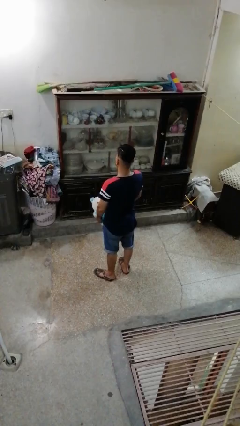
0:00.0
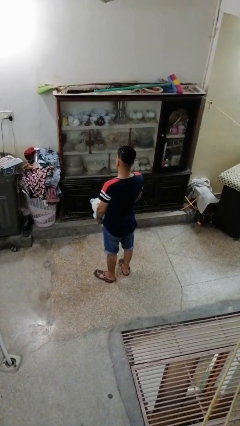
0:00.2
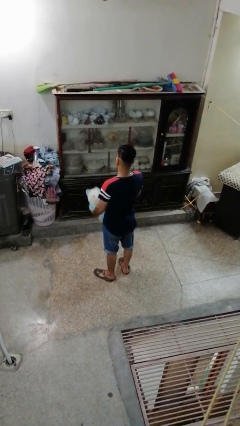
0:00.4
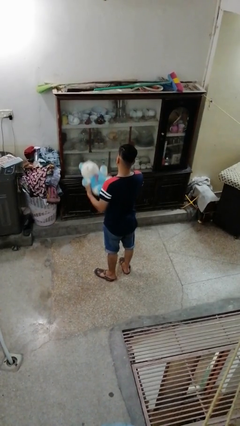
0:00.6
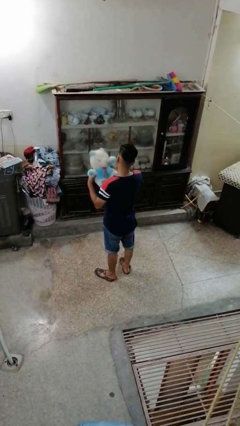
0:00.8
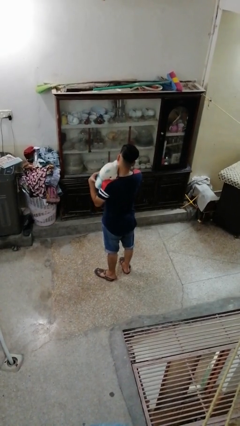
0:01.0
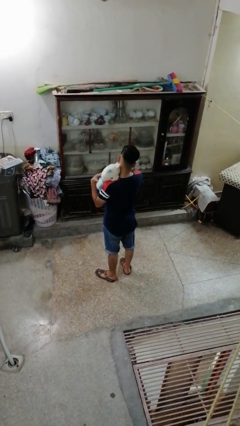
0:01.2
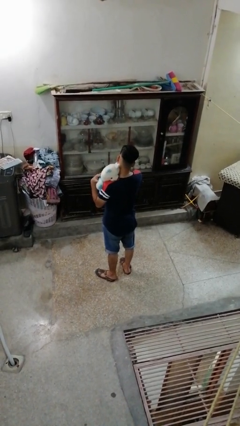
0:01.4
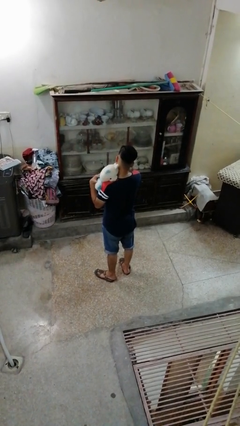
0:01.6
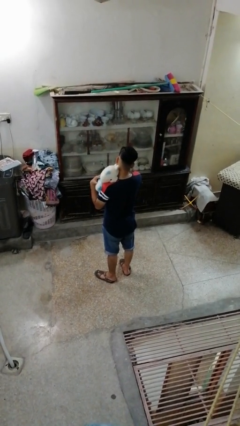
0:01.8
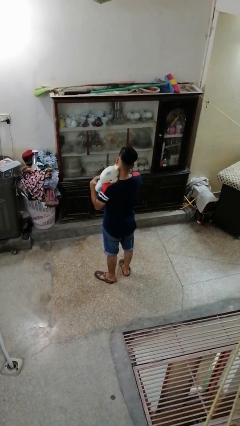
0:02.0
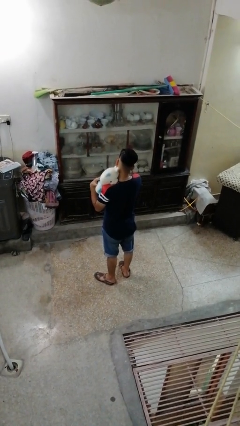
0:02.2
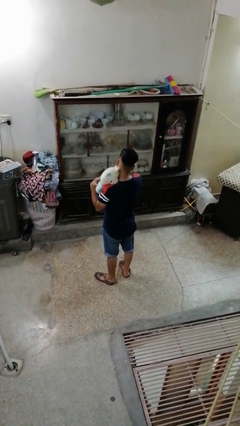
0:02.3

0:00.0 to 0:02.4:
person hugs stuffed animal

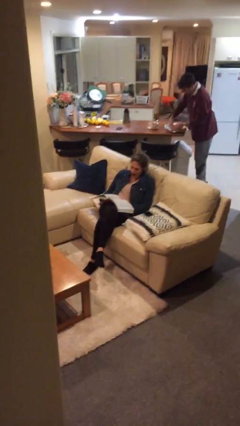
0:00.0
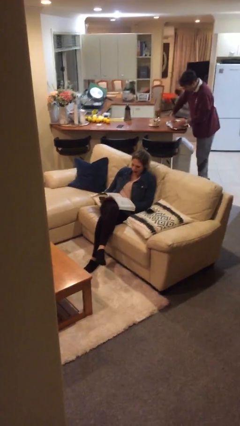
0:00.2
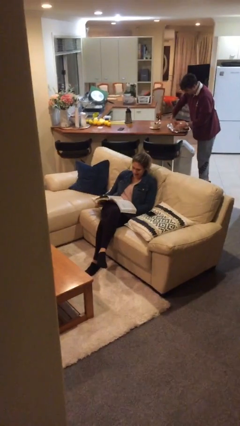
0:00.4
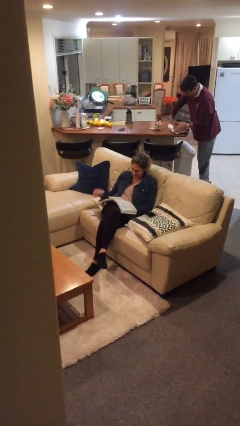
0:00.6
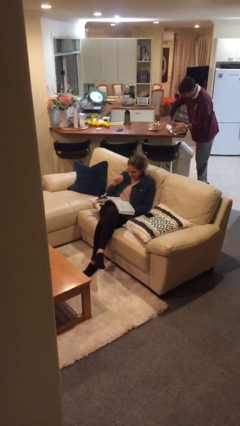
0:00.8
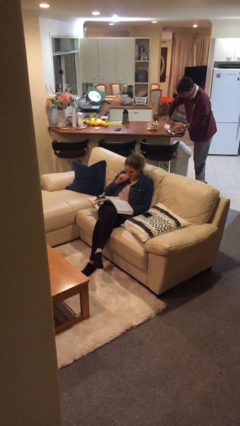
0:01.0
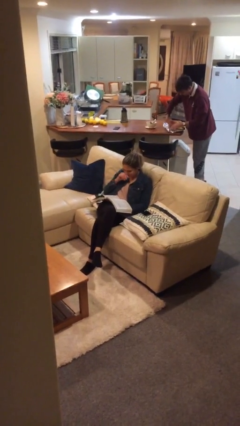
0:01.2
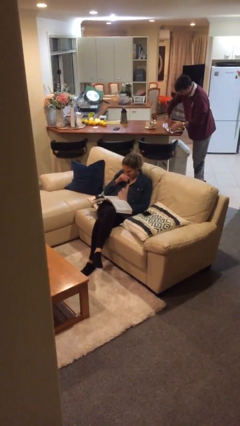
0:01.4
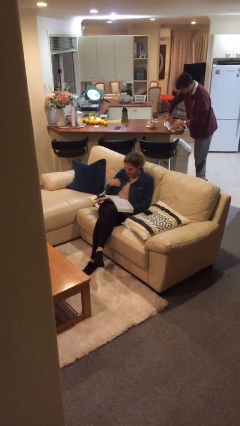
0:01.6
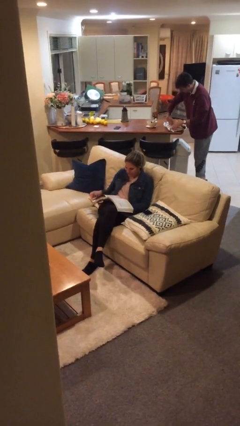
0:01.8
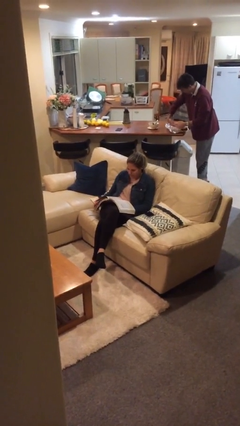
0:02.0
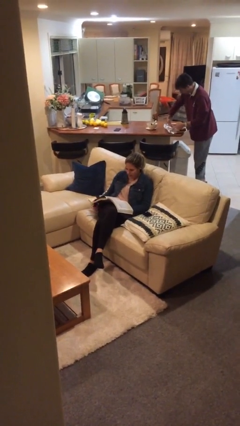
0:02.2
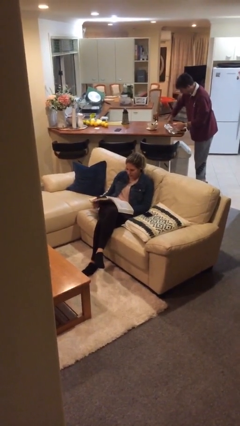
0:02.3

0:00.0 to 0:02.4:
person reads document

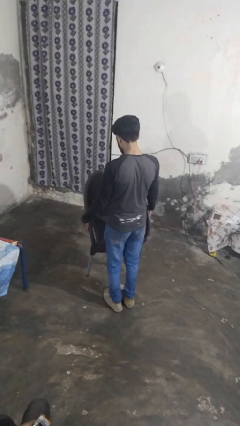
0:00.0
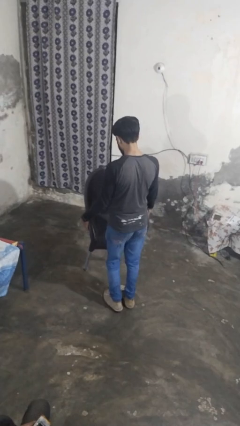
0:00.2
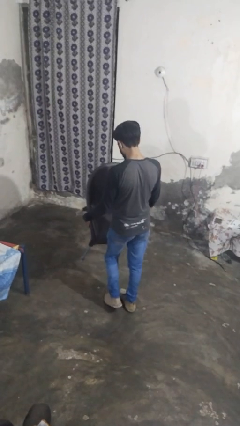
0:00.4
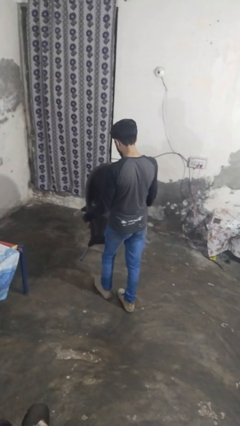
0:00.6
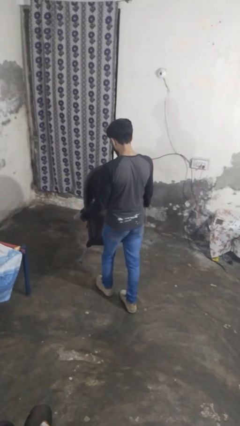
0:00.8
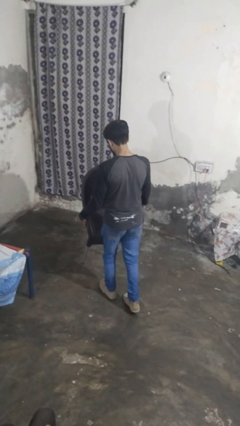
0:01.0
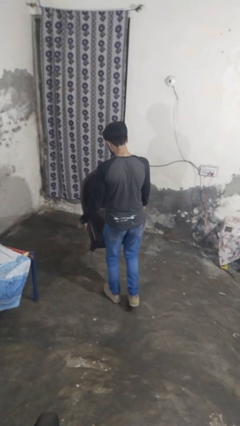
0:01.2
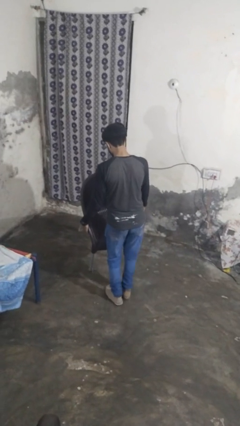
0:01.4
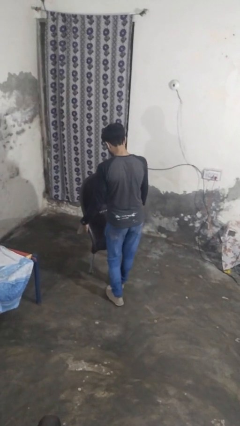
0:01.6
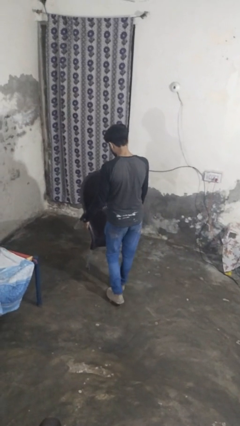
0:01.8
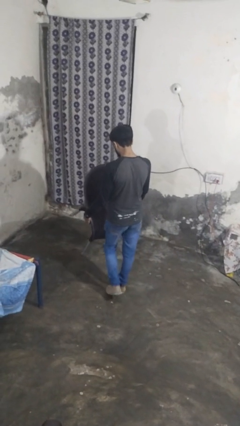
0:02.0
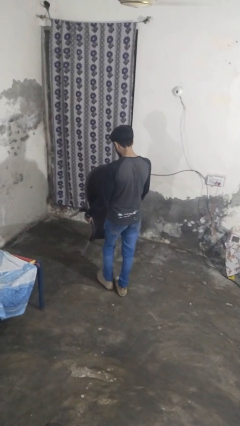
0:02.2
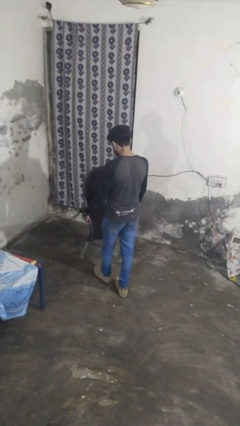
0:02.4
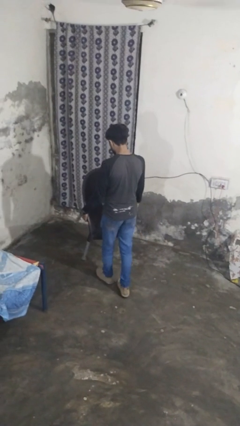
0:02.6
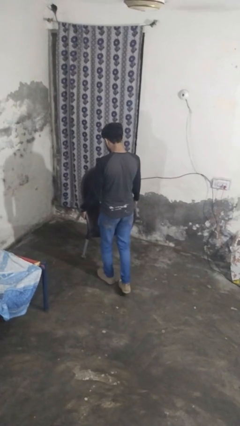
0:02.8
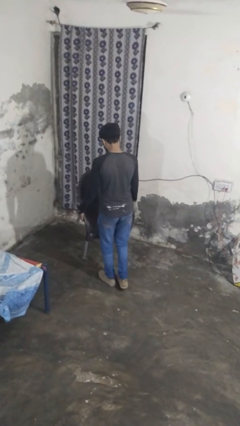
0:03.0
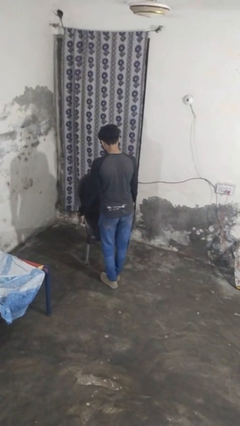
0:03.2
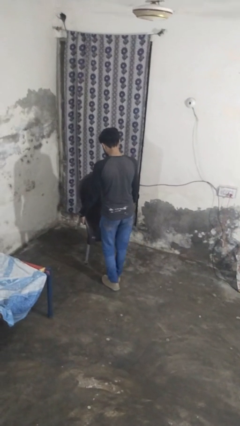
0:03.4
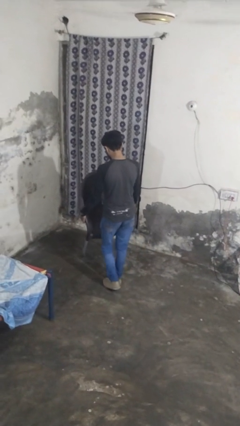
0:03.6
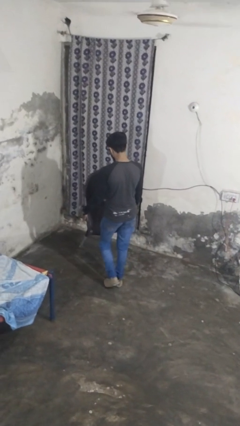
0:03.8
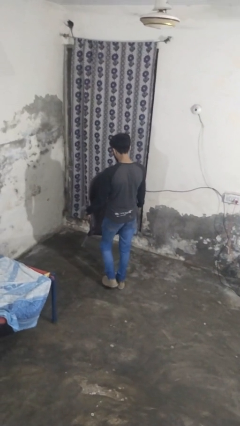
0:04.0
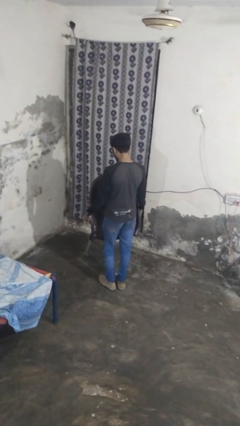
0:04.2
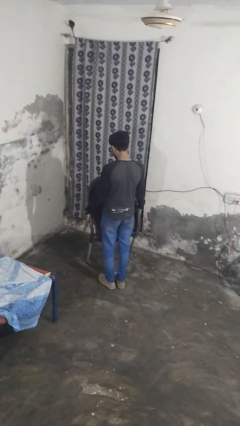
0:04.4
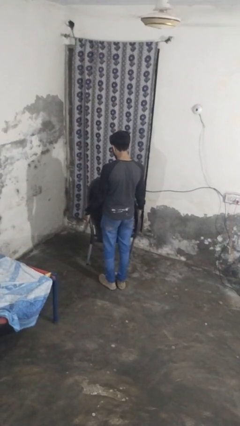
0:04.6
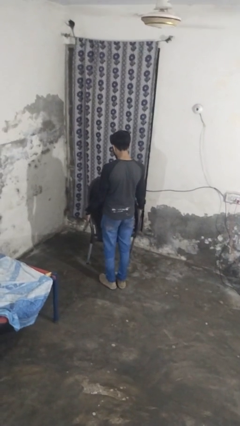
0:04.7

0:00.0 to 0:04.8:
person carries furniture

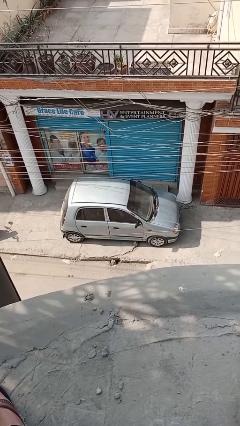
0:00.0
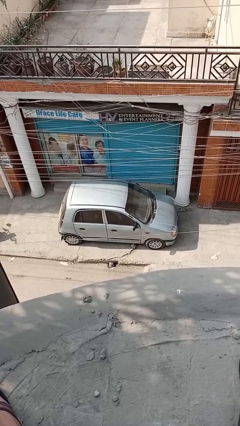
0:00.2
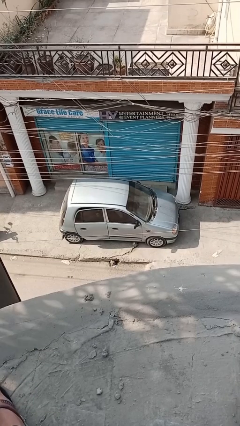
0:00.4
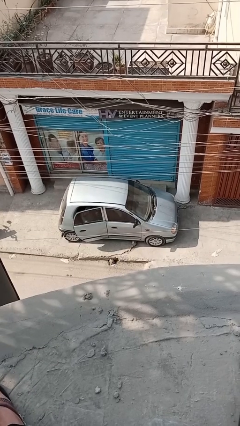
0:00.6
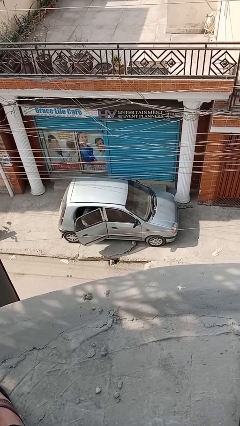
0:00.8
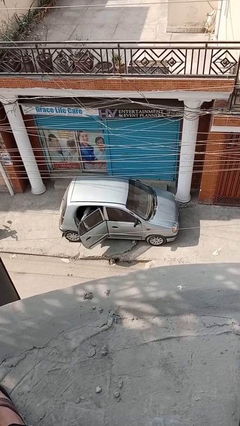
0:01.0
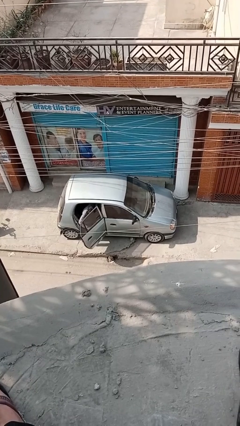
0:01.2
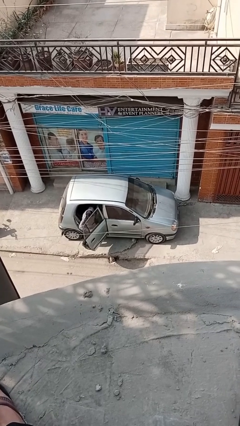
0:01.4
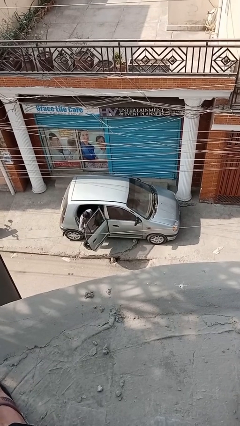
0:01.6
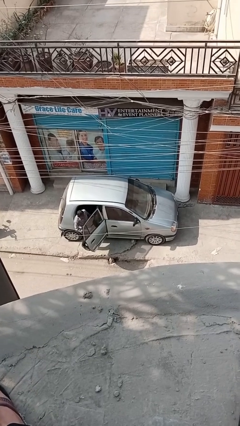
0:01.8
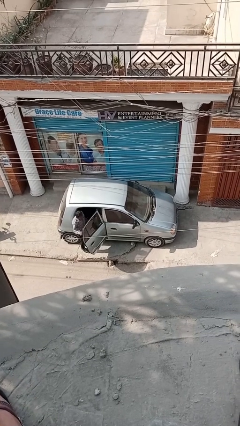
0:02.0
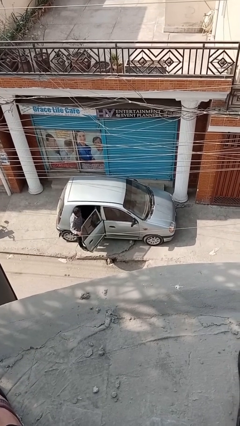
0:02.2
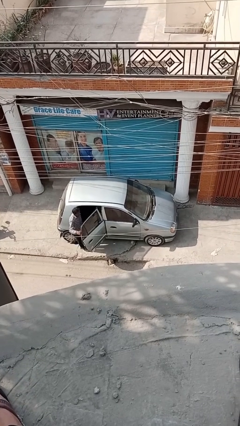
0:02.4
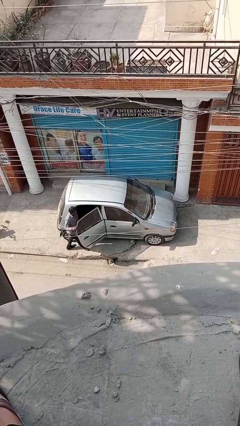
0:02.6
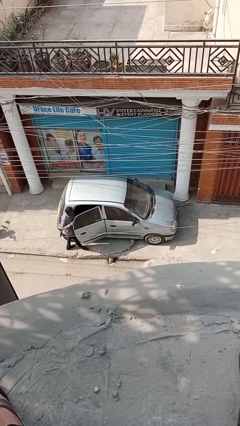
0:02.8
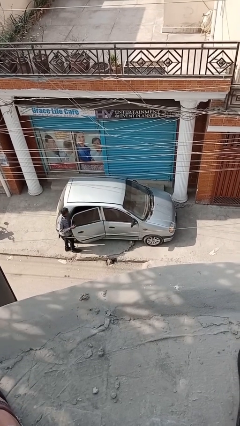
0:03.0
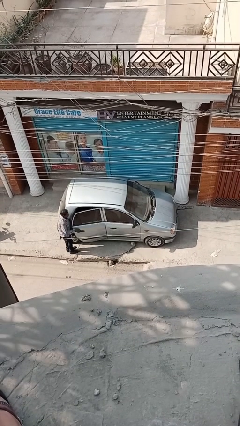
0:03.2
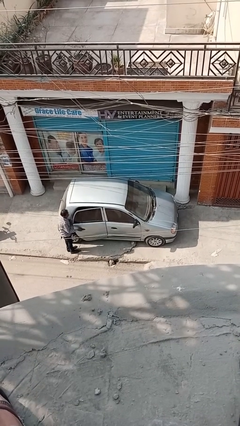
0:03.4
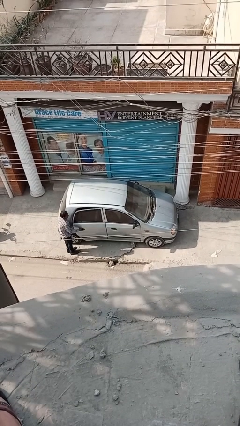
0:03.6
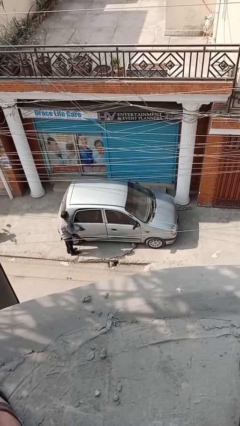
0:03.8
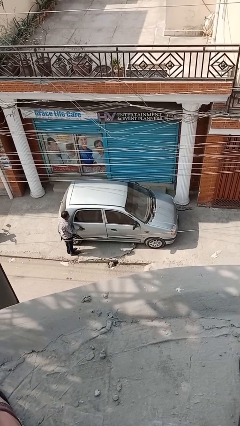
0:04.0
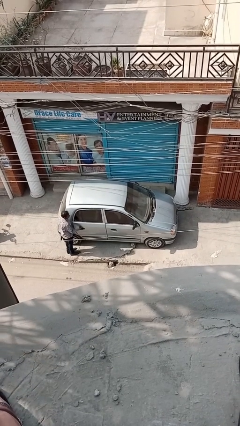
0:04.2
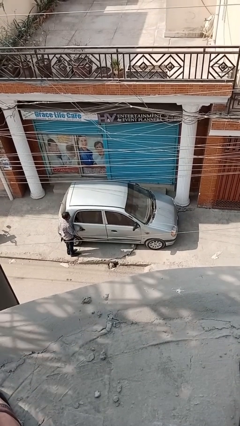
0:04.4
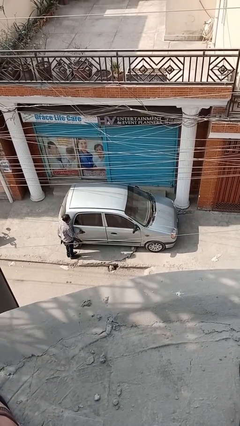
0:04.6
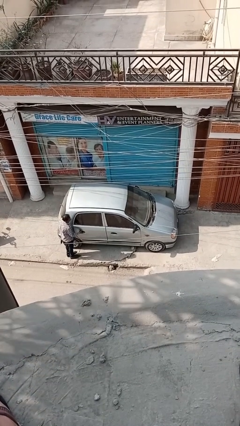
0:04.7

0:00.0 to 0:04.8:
car drops off person

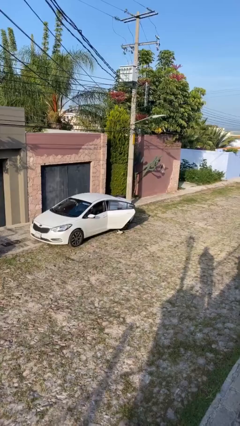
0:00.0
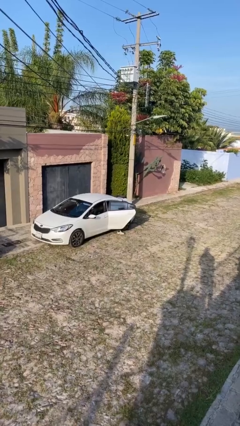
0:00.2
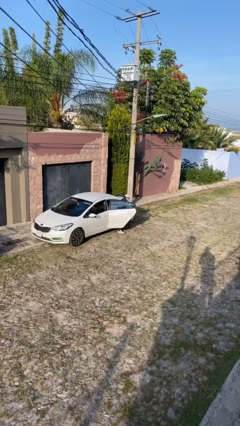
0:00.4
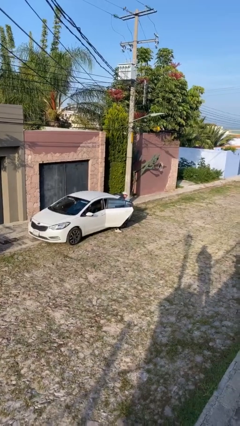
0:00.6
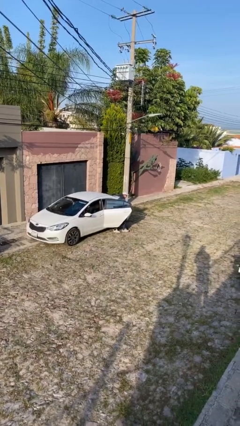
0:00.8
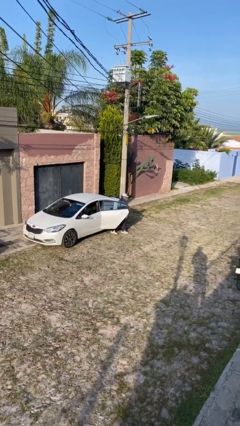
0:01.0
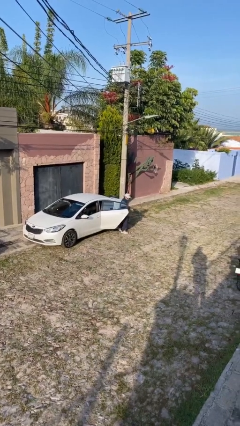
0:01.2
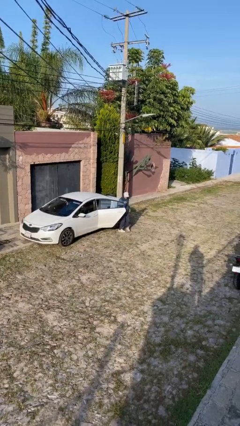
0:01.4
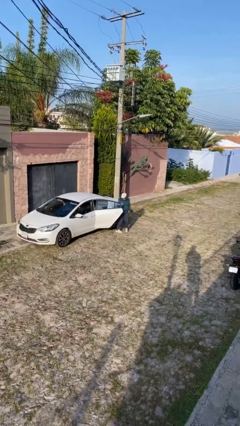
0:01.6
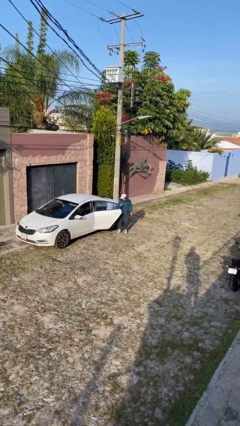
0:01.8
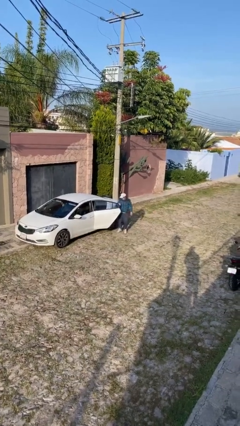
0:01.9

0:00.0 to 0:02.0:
person exits car

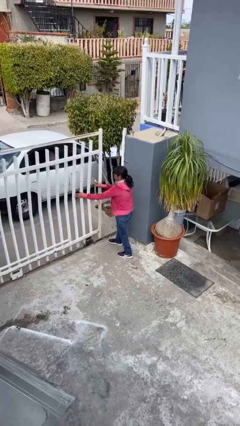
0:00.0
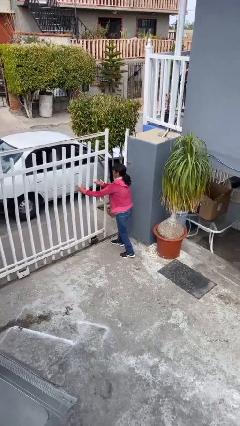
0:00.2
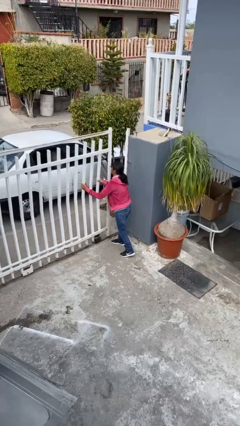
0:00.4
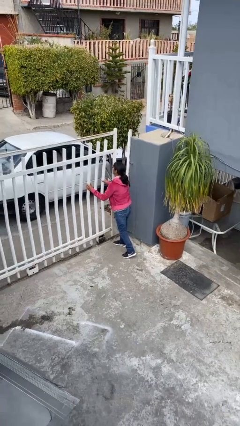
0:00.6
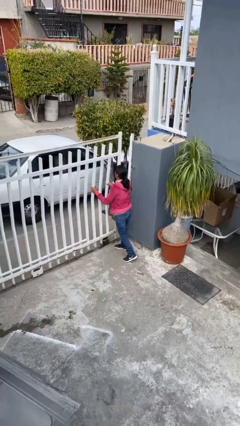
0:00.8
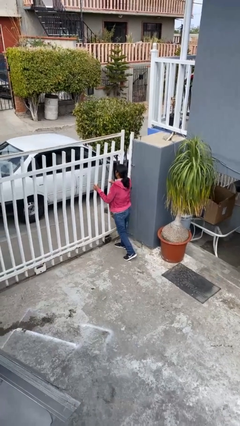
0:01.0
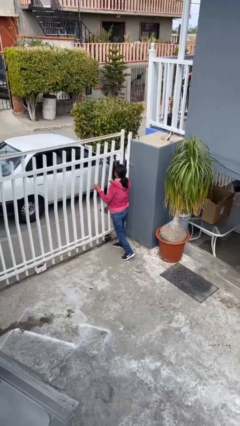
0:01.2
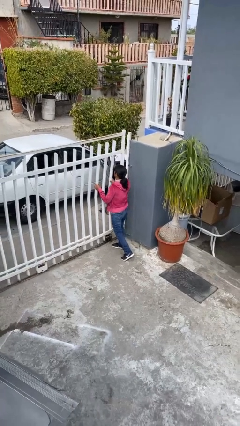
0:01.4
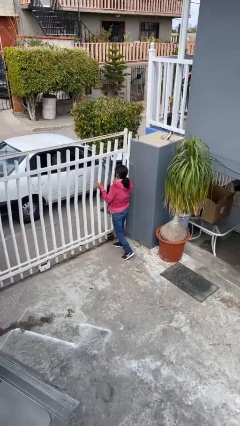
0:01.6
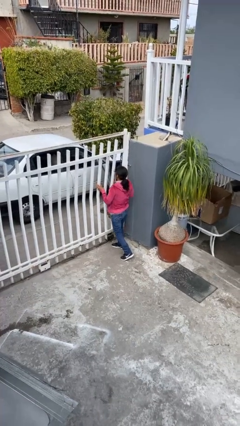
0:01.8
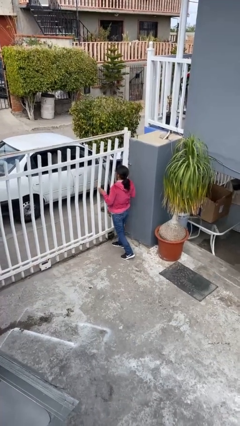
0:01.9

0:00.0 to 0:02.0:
person closes facility door
